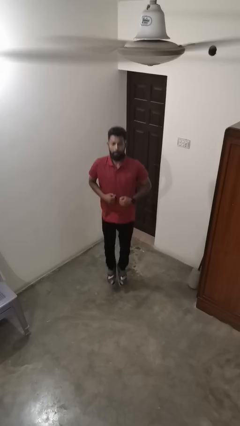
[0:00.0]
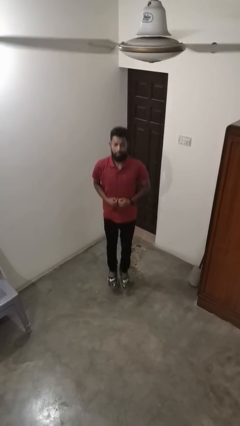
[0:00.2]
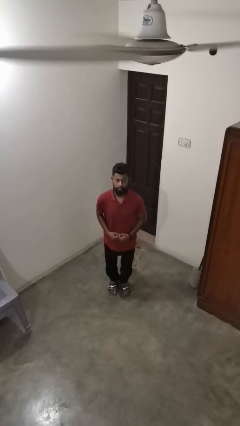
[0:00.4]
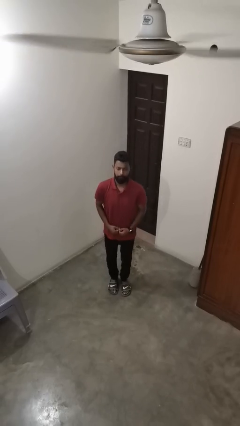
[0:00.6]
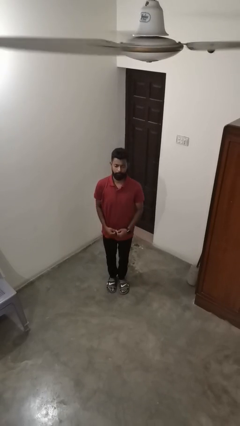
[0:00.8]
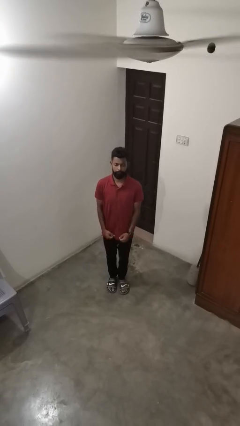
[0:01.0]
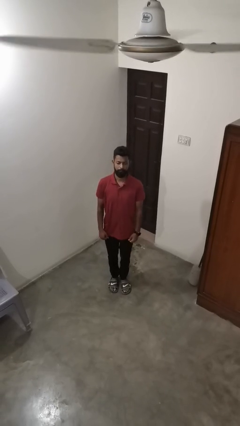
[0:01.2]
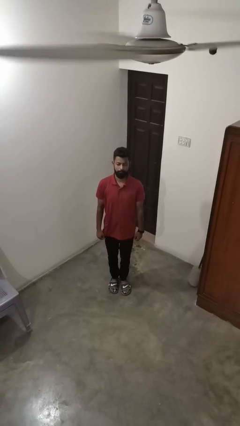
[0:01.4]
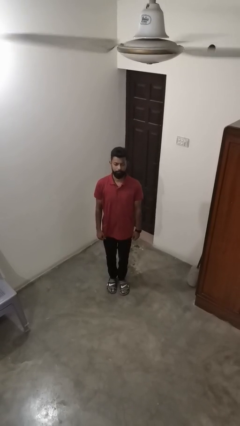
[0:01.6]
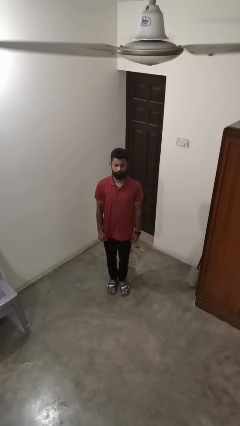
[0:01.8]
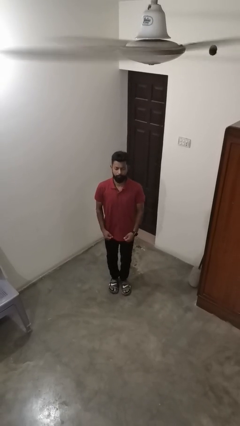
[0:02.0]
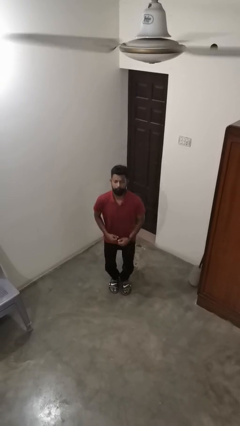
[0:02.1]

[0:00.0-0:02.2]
person jumps

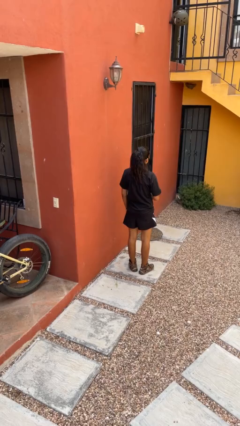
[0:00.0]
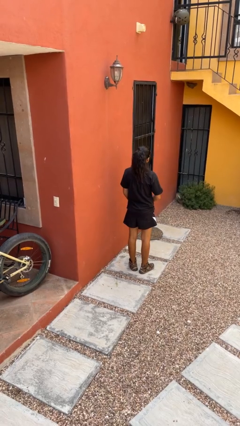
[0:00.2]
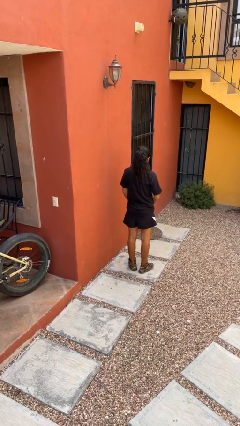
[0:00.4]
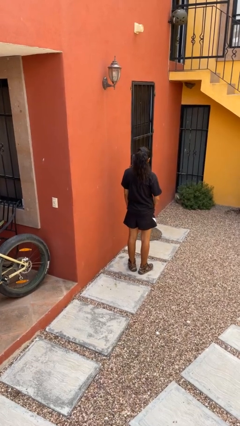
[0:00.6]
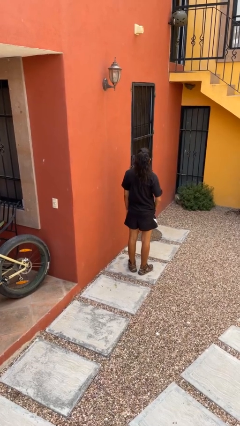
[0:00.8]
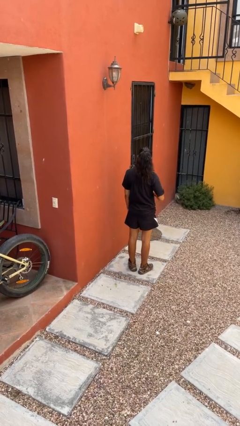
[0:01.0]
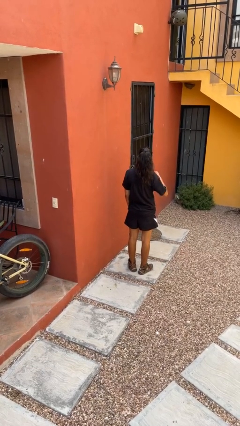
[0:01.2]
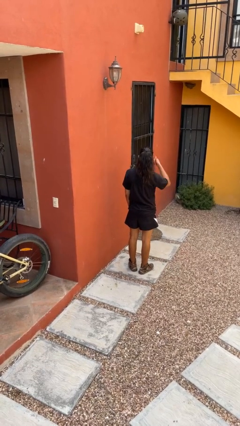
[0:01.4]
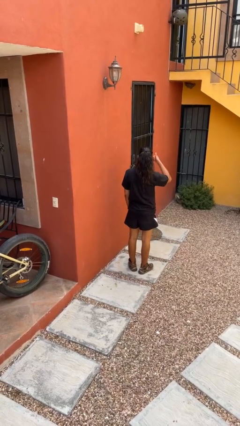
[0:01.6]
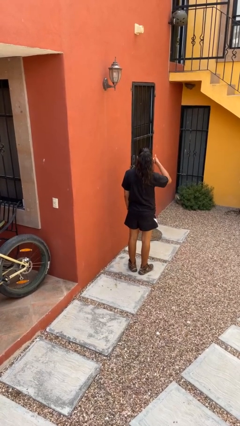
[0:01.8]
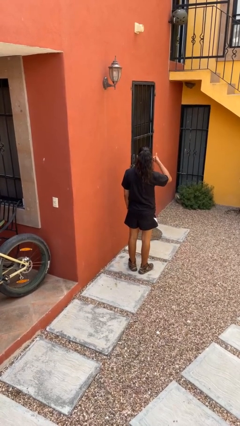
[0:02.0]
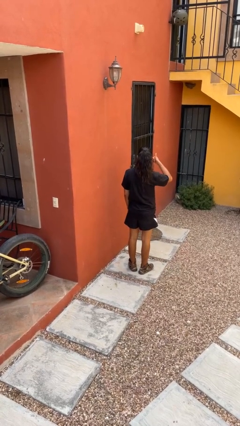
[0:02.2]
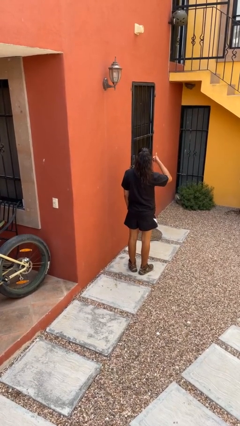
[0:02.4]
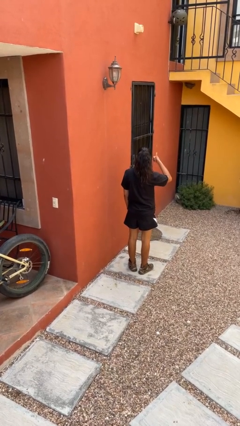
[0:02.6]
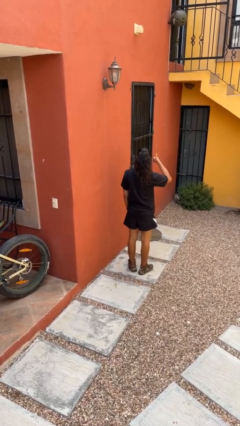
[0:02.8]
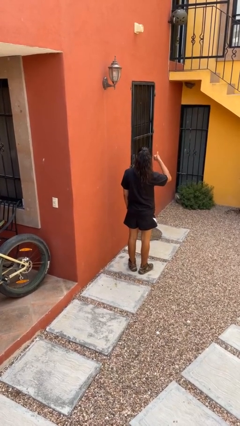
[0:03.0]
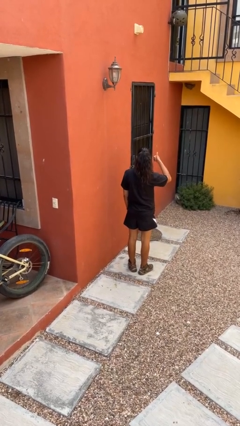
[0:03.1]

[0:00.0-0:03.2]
person gestures thumbs up

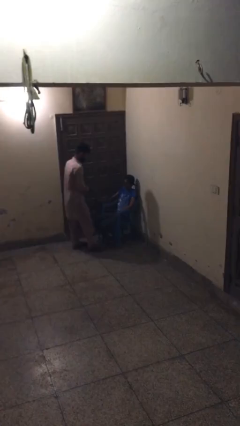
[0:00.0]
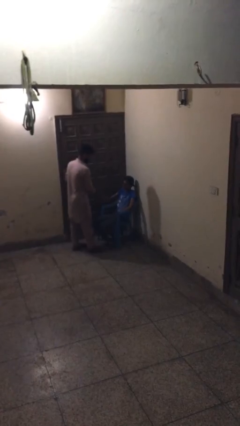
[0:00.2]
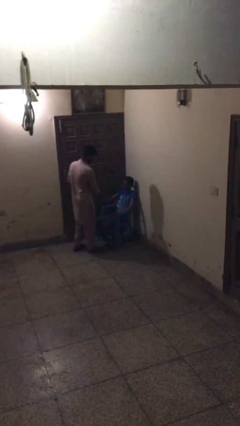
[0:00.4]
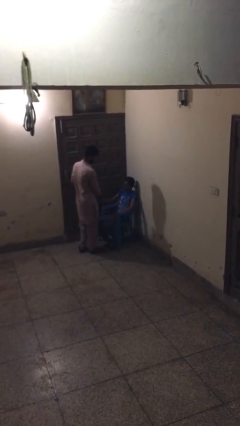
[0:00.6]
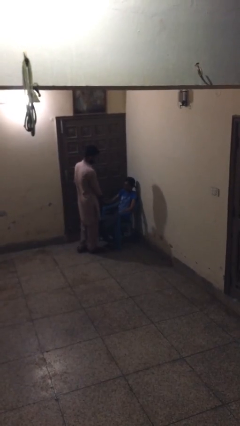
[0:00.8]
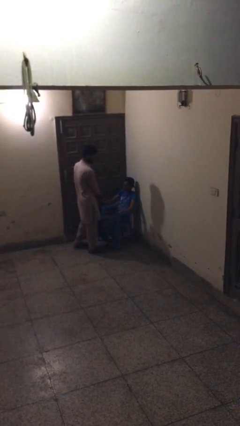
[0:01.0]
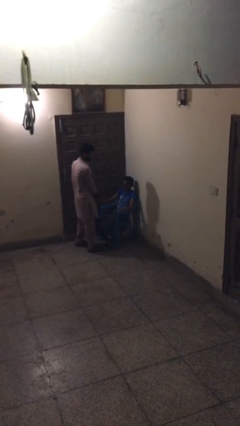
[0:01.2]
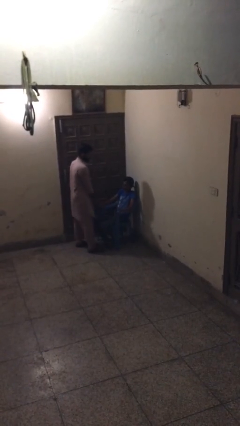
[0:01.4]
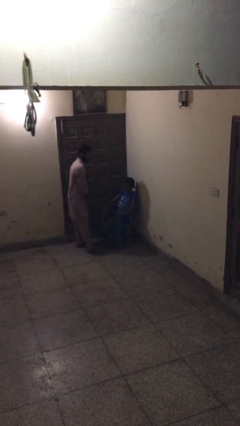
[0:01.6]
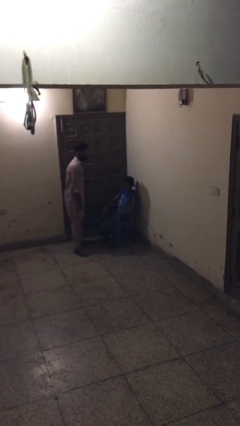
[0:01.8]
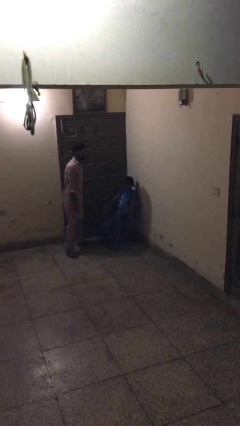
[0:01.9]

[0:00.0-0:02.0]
person shakes hand

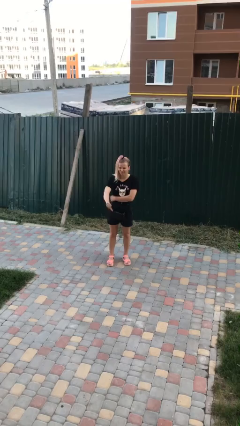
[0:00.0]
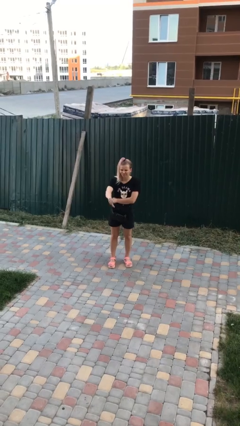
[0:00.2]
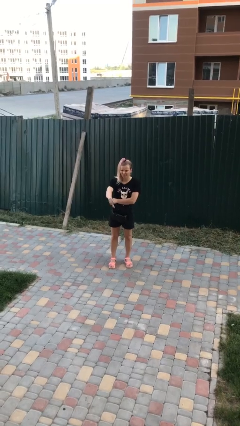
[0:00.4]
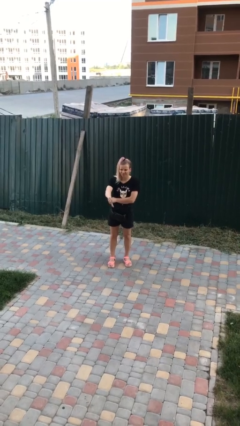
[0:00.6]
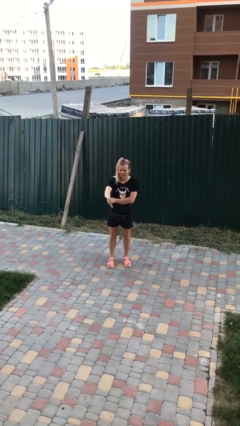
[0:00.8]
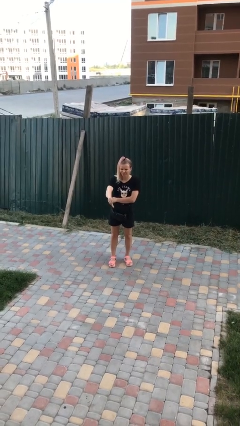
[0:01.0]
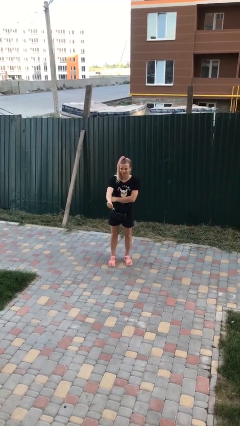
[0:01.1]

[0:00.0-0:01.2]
person gestures thumbs down

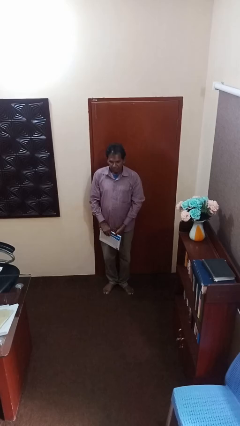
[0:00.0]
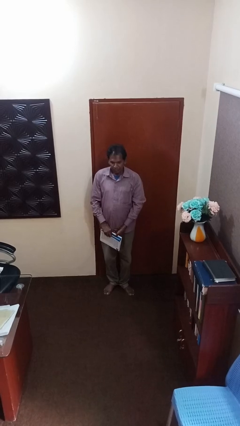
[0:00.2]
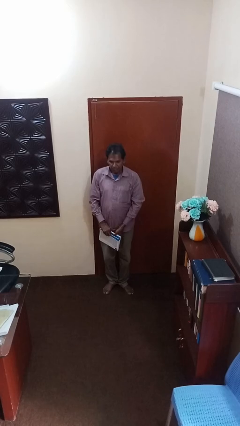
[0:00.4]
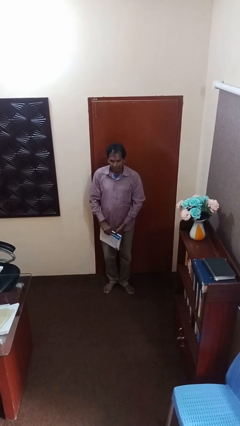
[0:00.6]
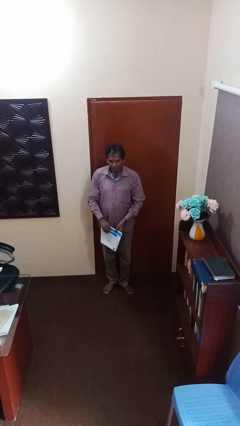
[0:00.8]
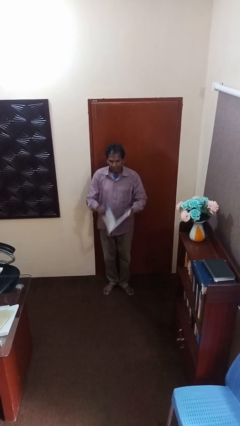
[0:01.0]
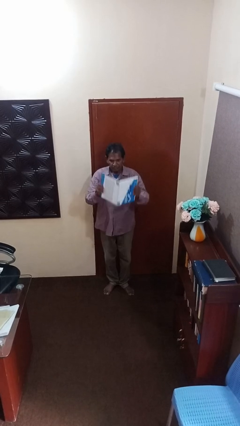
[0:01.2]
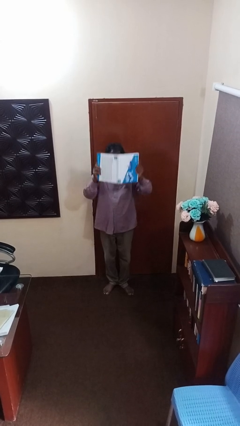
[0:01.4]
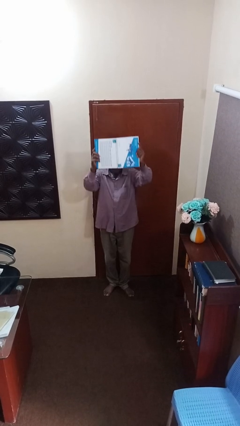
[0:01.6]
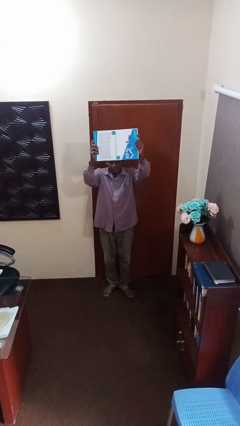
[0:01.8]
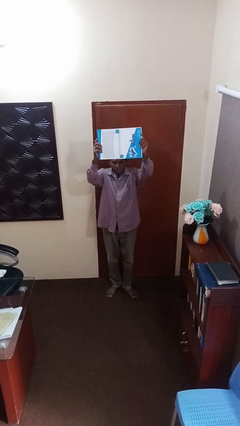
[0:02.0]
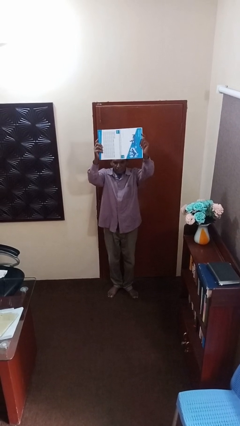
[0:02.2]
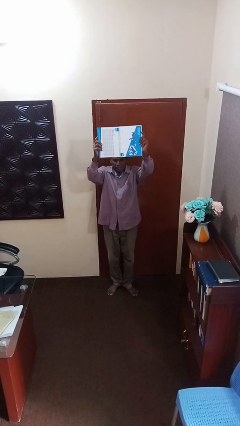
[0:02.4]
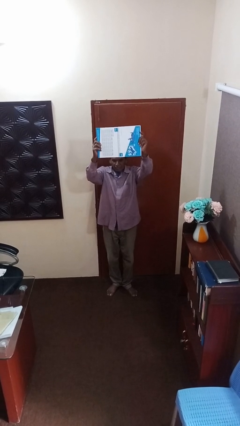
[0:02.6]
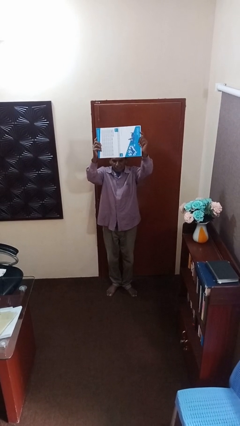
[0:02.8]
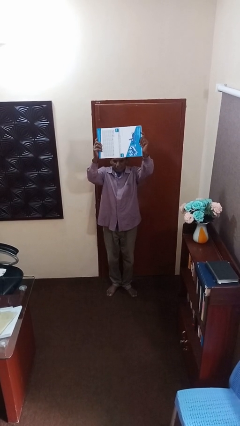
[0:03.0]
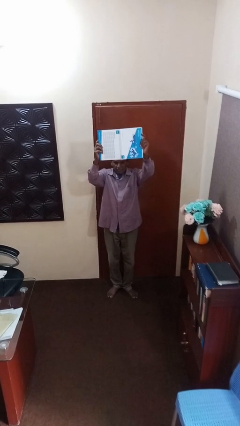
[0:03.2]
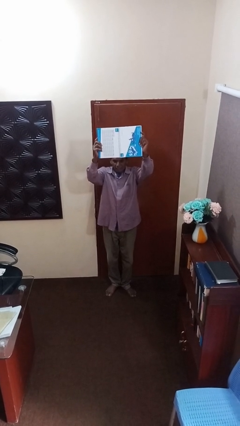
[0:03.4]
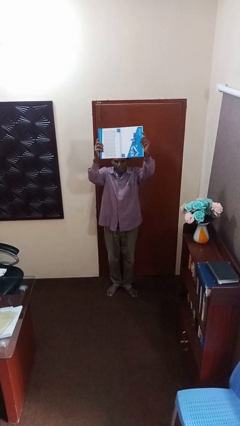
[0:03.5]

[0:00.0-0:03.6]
person holds object above head

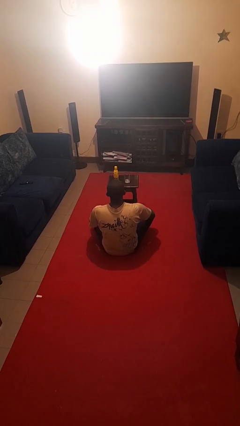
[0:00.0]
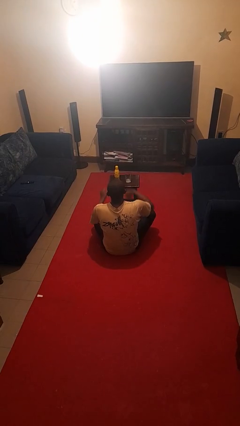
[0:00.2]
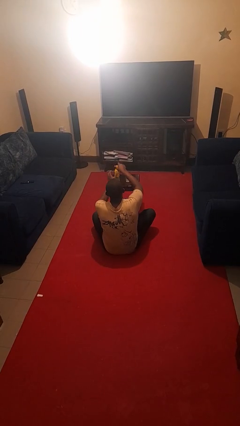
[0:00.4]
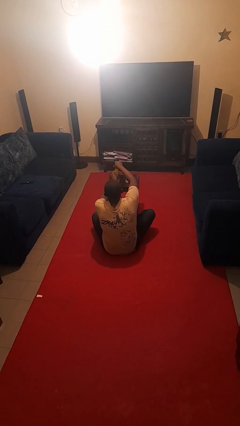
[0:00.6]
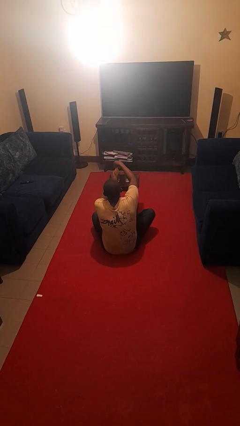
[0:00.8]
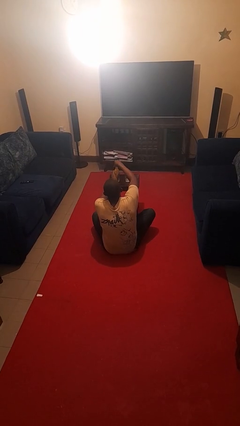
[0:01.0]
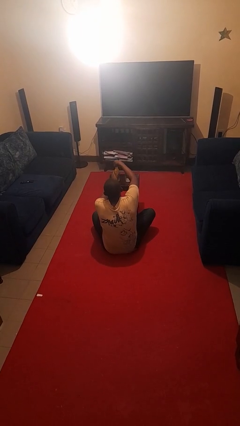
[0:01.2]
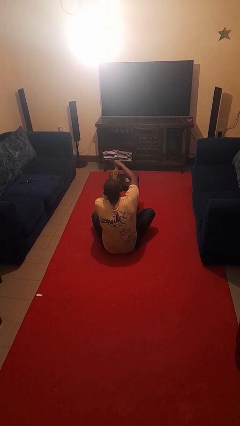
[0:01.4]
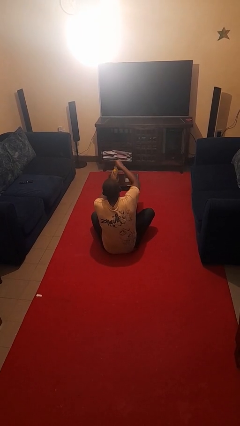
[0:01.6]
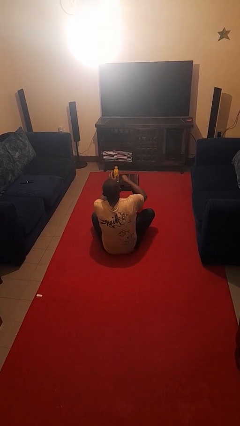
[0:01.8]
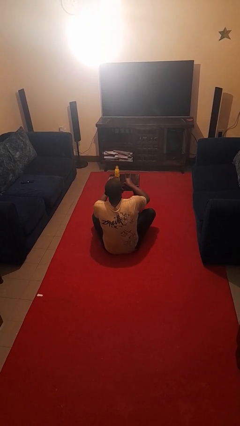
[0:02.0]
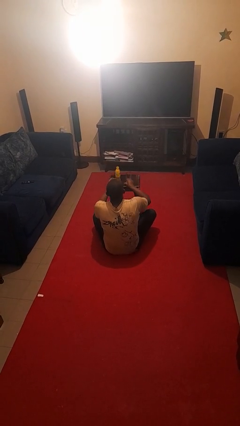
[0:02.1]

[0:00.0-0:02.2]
person unscrews lid from bottle

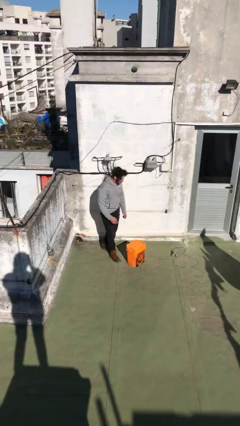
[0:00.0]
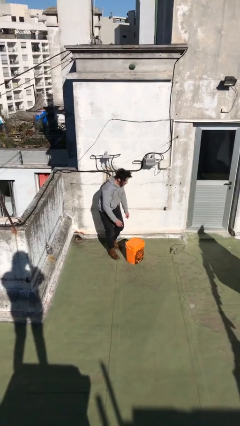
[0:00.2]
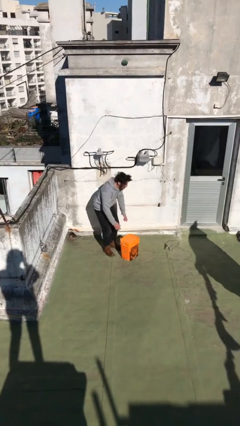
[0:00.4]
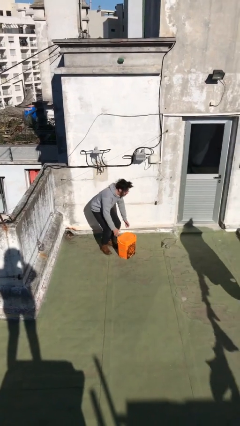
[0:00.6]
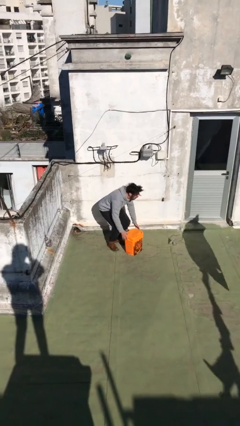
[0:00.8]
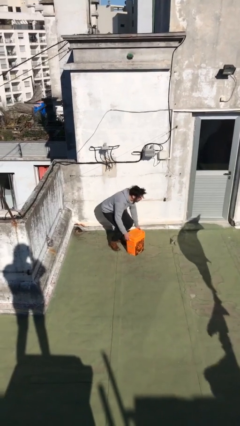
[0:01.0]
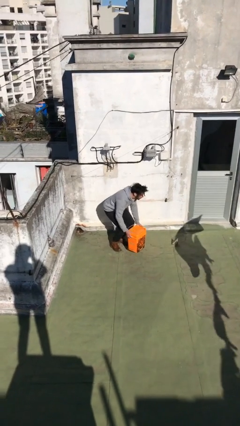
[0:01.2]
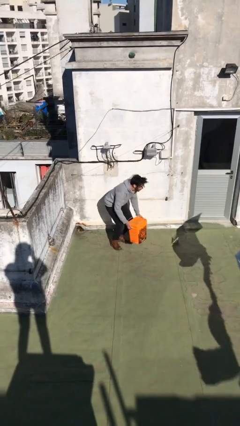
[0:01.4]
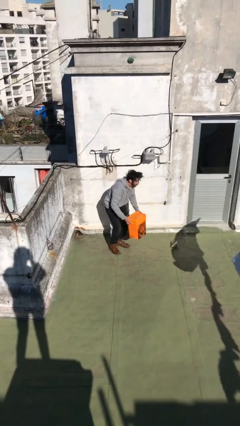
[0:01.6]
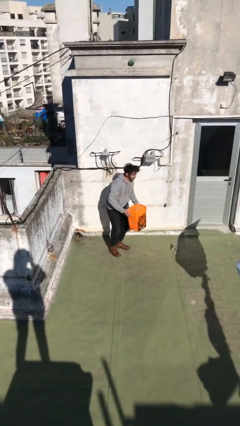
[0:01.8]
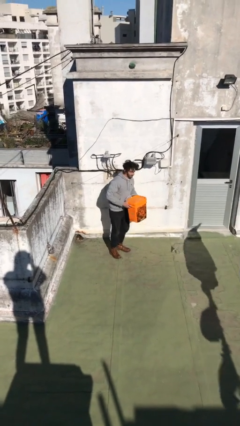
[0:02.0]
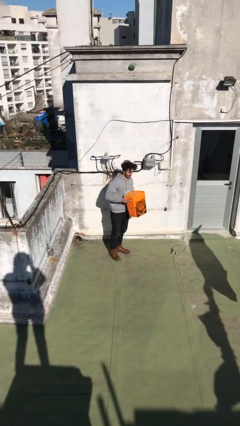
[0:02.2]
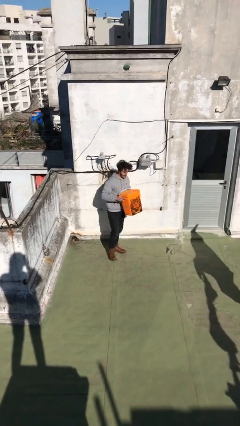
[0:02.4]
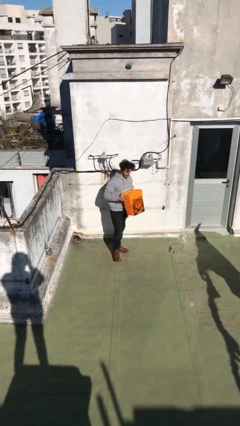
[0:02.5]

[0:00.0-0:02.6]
person picks up object from floor
